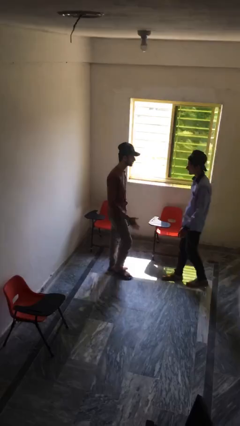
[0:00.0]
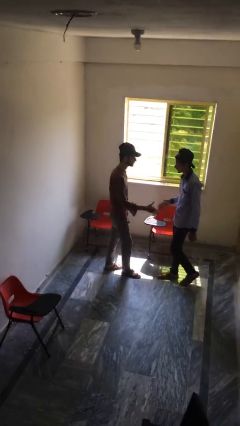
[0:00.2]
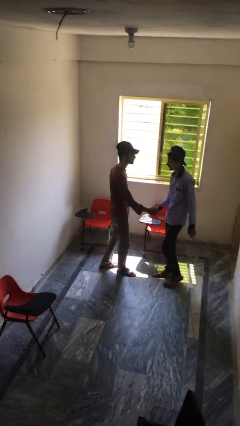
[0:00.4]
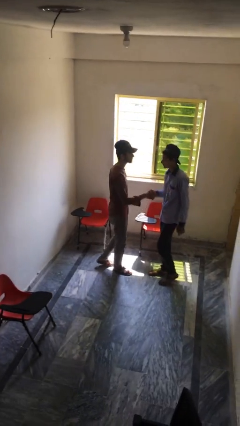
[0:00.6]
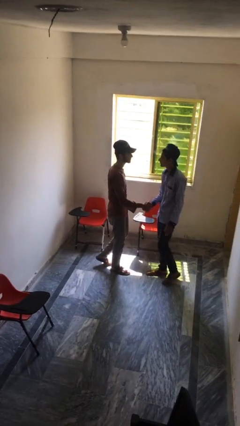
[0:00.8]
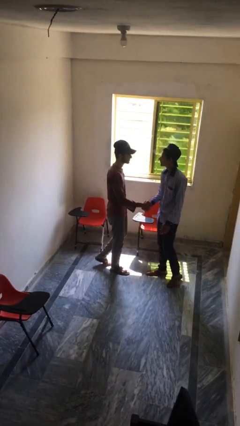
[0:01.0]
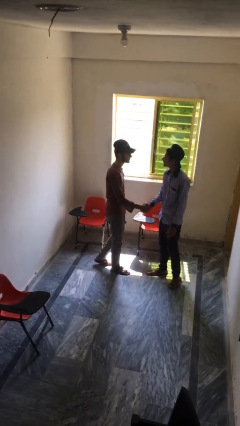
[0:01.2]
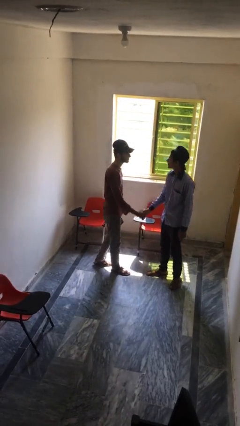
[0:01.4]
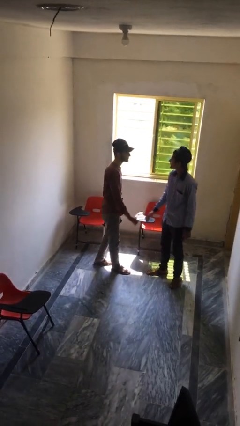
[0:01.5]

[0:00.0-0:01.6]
person shakes hand

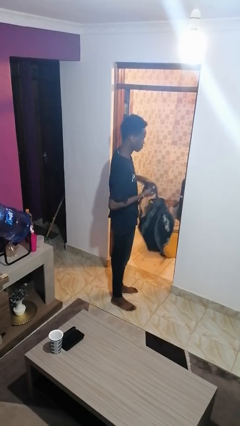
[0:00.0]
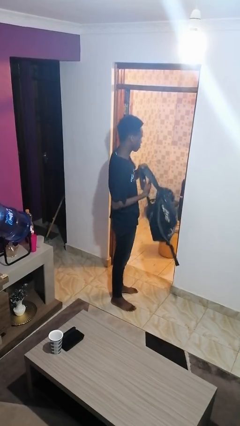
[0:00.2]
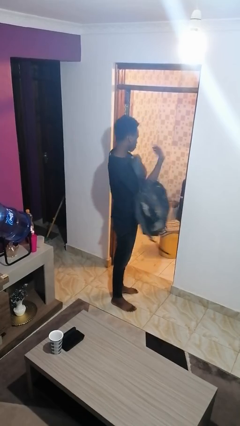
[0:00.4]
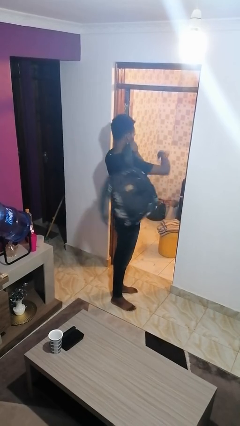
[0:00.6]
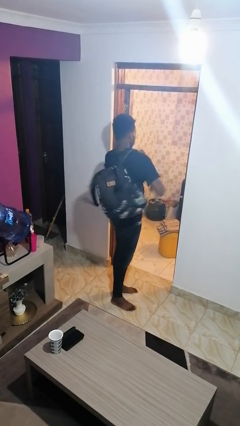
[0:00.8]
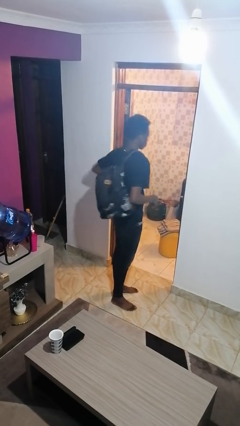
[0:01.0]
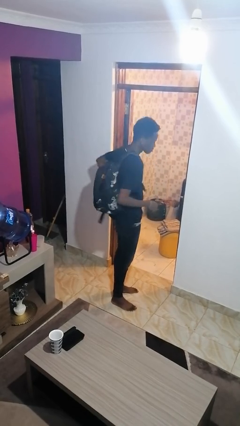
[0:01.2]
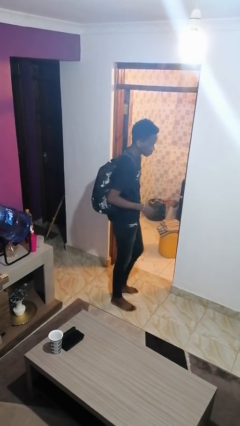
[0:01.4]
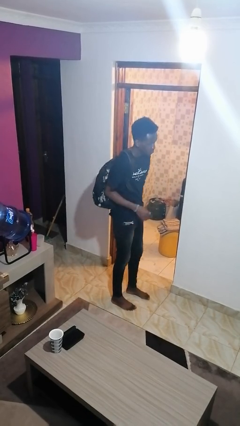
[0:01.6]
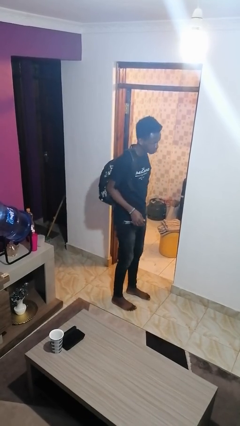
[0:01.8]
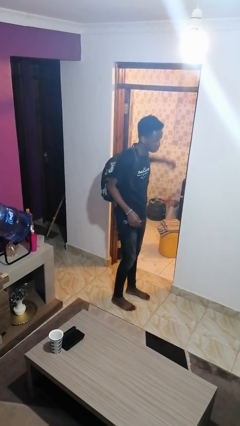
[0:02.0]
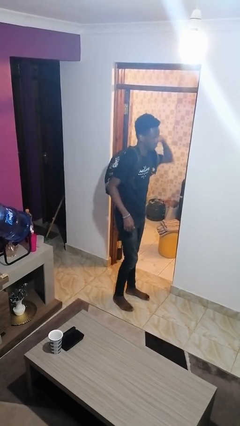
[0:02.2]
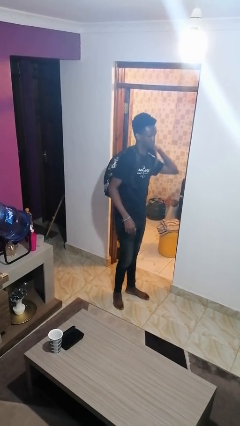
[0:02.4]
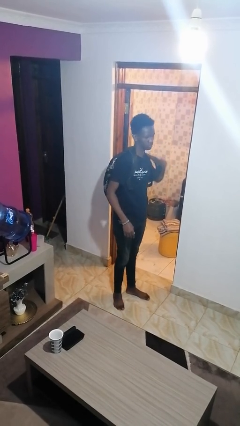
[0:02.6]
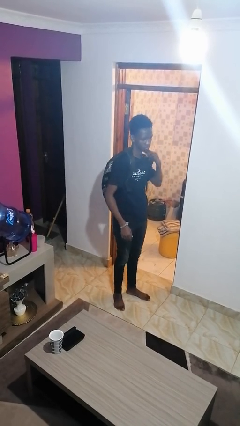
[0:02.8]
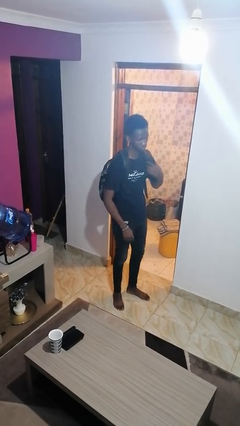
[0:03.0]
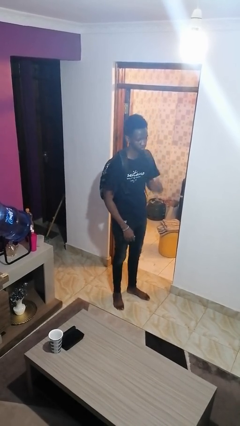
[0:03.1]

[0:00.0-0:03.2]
person puts on backpack

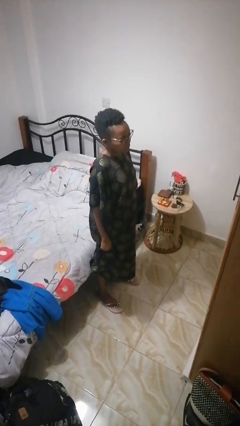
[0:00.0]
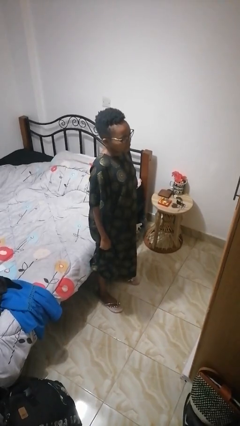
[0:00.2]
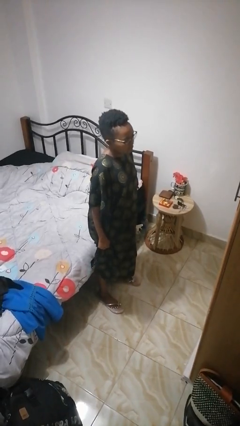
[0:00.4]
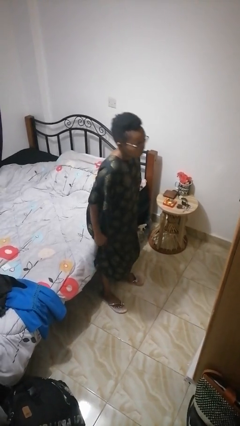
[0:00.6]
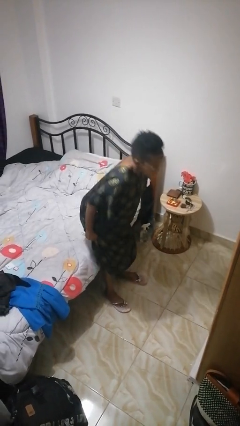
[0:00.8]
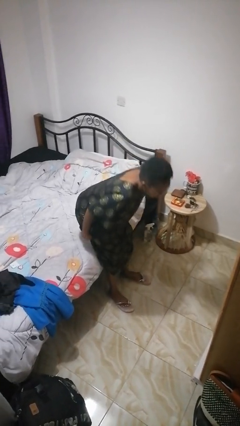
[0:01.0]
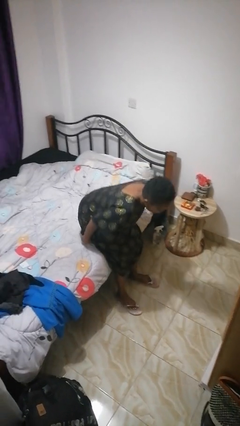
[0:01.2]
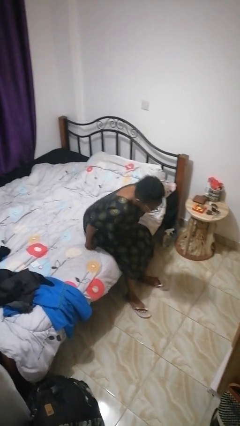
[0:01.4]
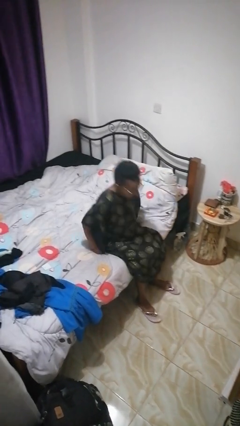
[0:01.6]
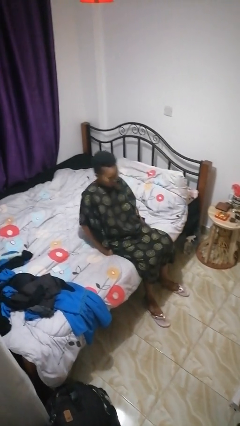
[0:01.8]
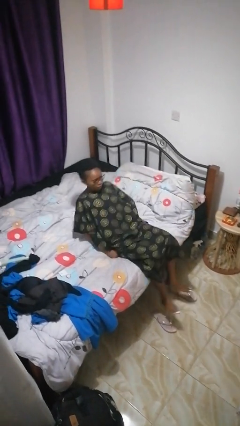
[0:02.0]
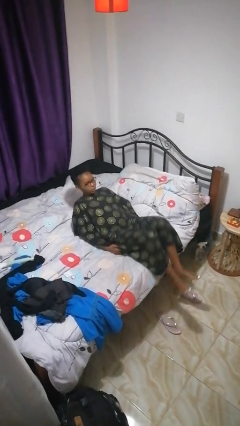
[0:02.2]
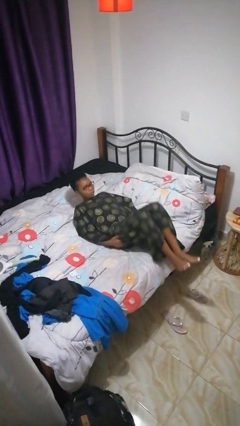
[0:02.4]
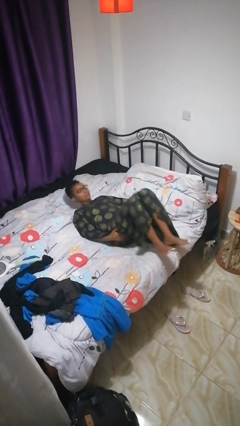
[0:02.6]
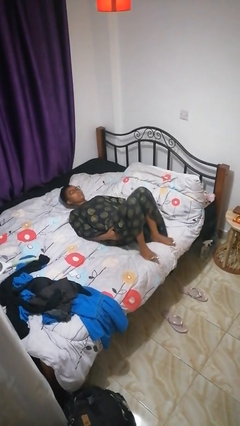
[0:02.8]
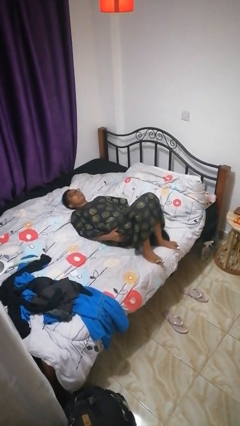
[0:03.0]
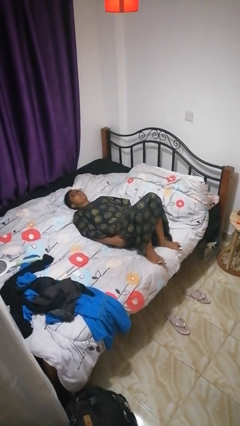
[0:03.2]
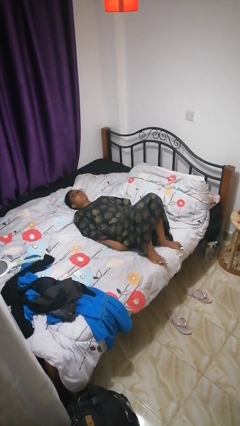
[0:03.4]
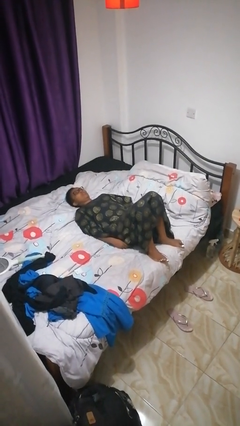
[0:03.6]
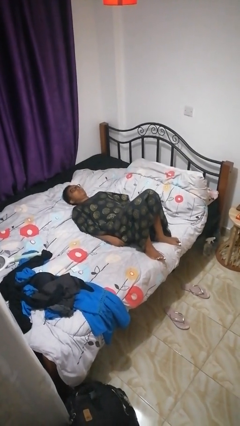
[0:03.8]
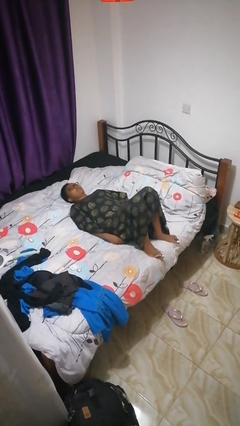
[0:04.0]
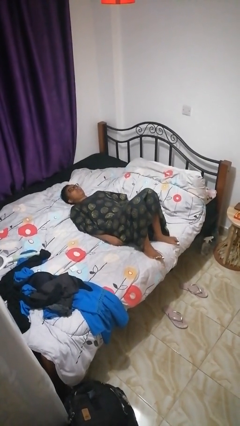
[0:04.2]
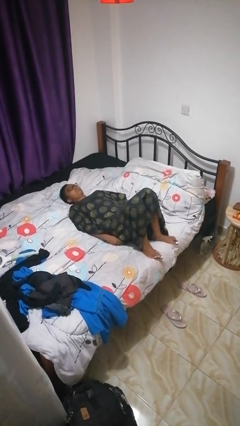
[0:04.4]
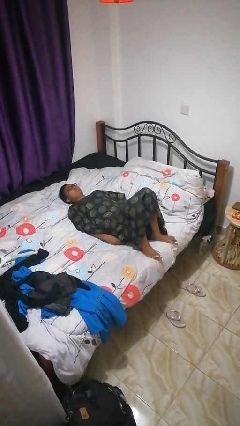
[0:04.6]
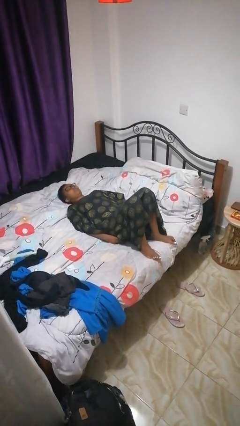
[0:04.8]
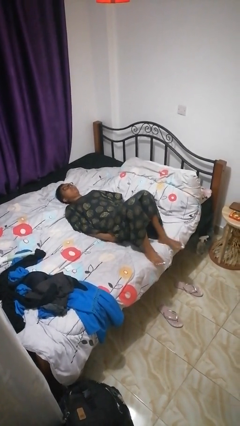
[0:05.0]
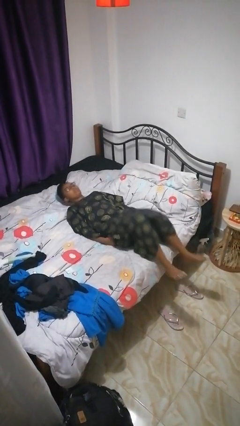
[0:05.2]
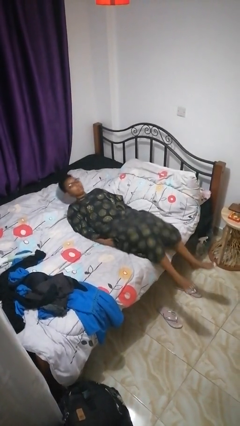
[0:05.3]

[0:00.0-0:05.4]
person lies down on bed

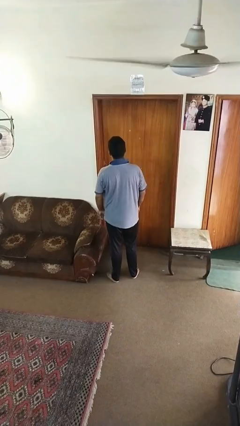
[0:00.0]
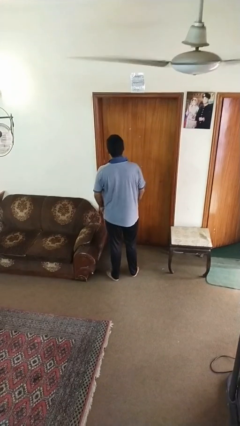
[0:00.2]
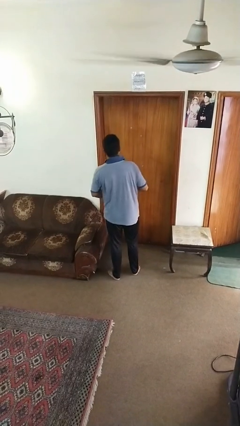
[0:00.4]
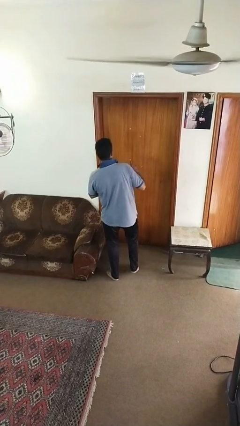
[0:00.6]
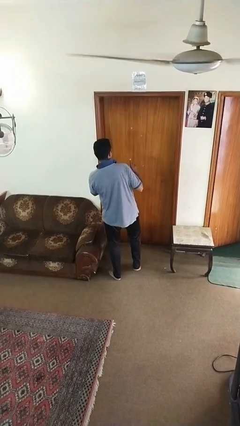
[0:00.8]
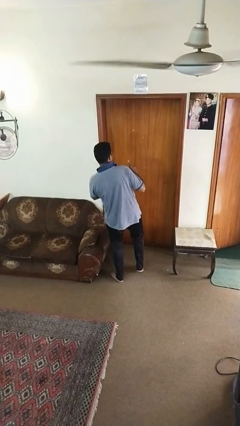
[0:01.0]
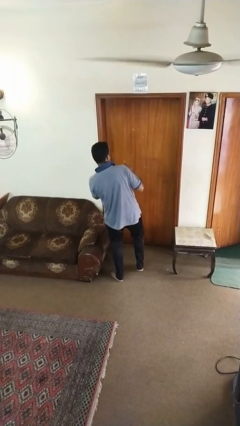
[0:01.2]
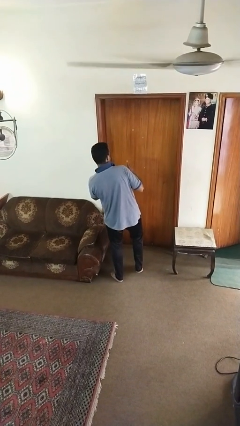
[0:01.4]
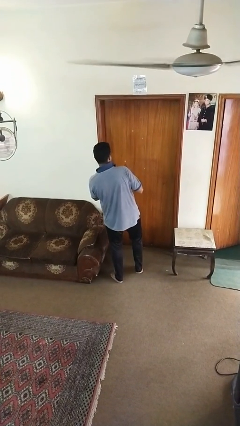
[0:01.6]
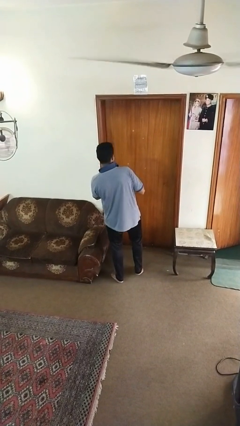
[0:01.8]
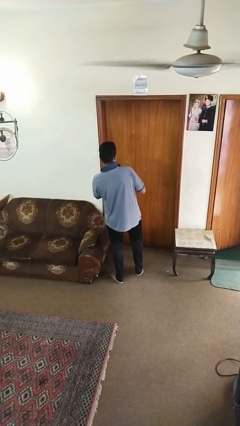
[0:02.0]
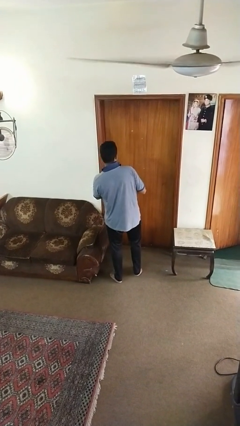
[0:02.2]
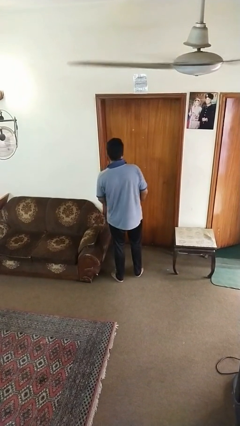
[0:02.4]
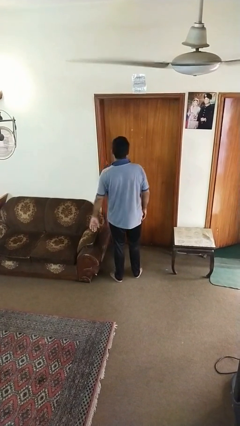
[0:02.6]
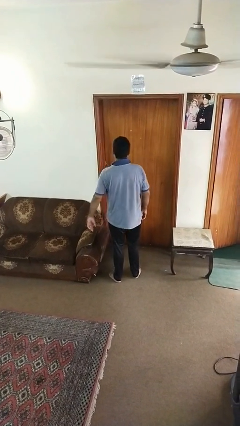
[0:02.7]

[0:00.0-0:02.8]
person dances in place

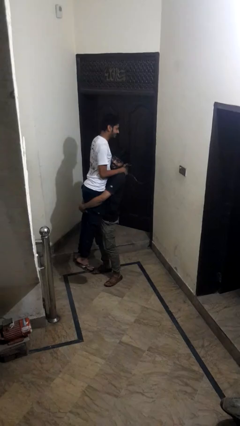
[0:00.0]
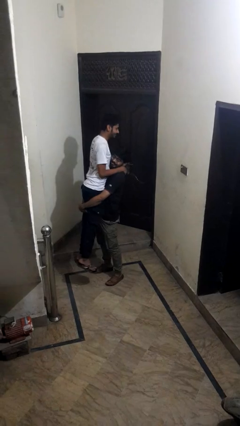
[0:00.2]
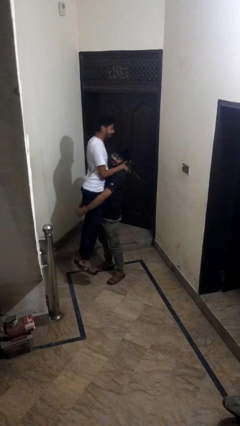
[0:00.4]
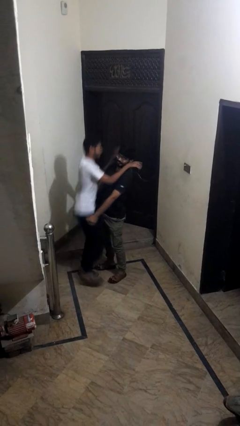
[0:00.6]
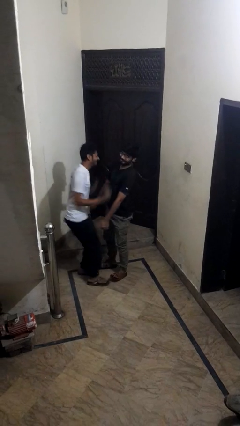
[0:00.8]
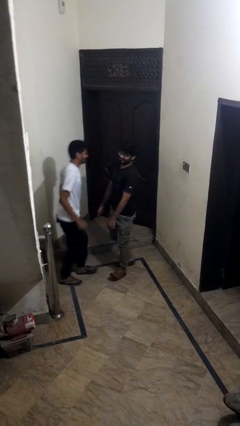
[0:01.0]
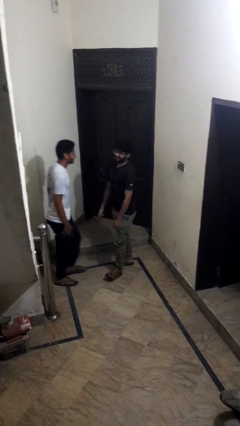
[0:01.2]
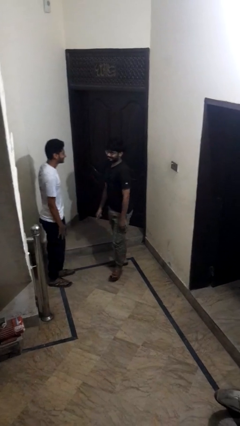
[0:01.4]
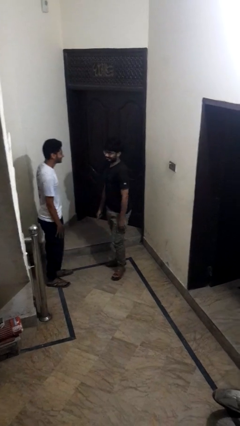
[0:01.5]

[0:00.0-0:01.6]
person takes off hat

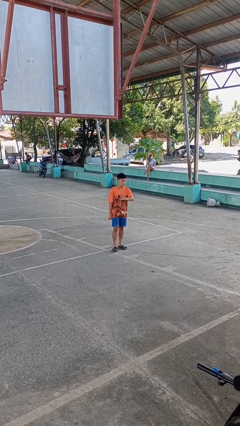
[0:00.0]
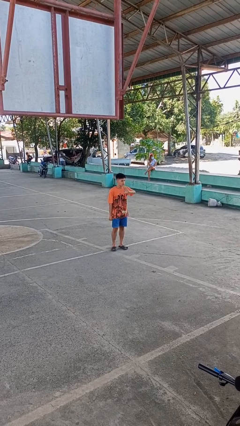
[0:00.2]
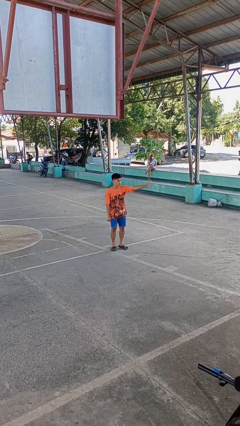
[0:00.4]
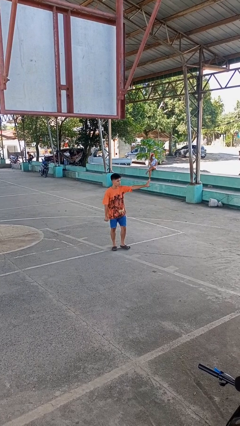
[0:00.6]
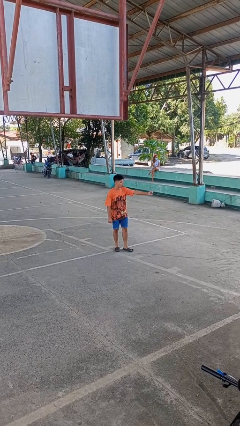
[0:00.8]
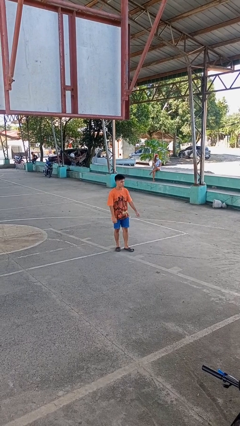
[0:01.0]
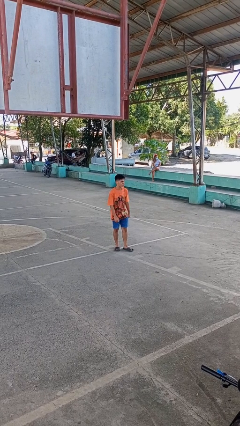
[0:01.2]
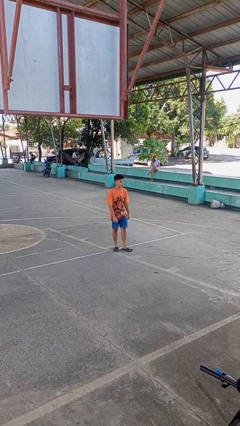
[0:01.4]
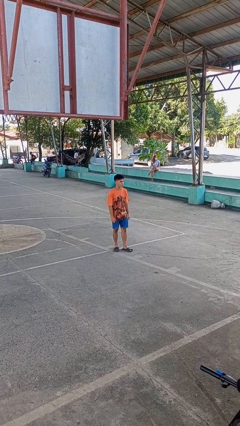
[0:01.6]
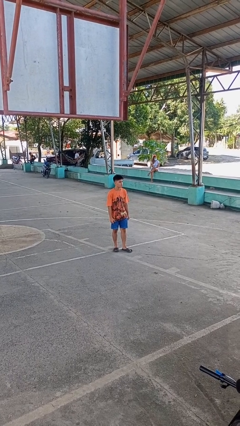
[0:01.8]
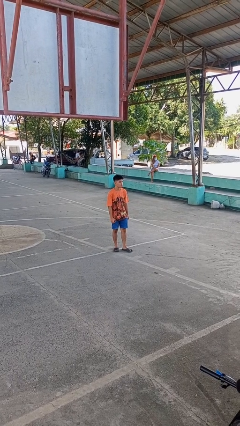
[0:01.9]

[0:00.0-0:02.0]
person gestures swipe left

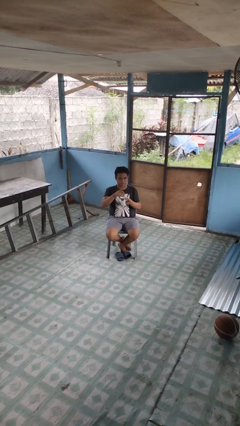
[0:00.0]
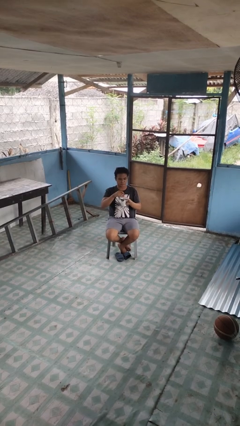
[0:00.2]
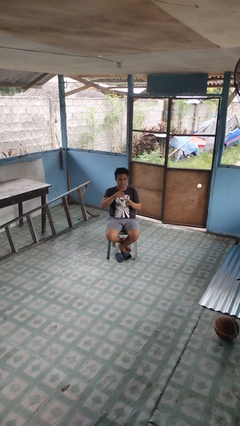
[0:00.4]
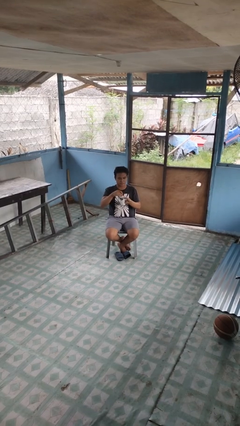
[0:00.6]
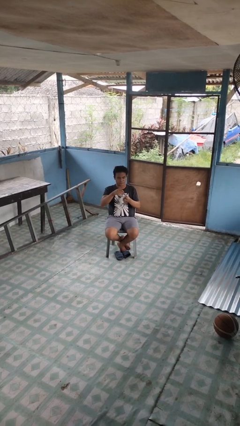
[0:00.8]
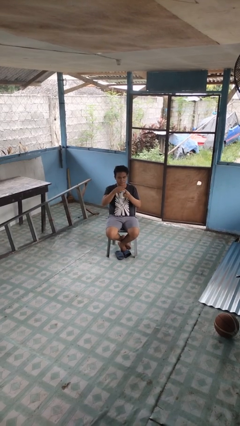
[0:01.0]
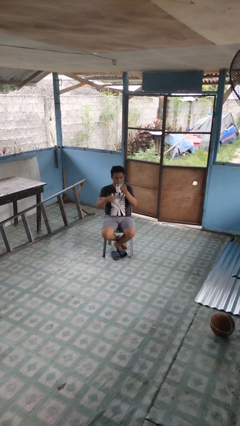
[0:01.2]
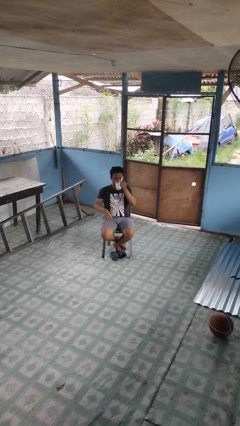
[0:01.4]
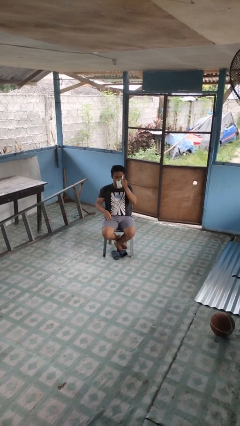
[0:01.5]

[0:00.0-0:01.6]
person stirs mug
